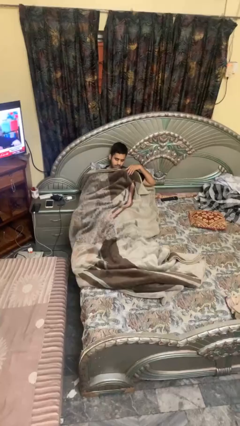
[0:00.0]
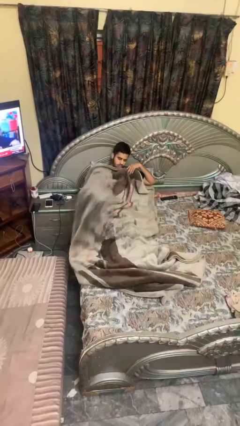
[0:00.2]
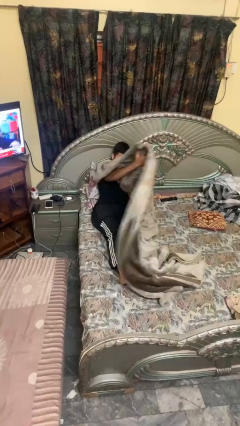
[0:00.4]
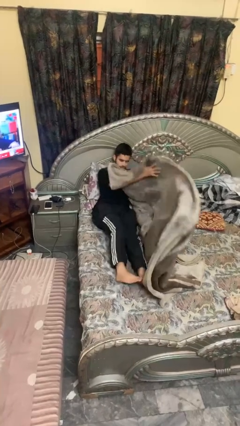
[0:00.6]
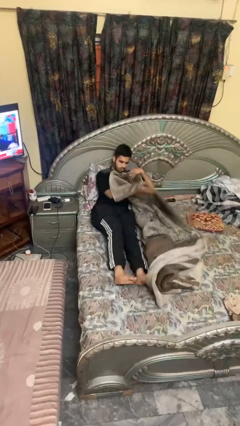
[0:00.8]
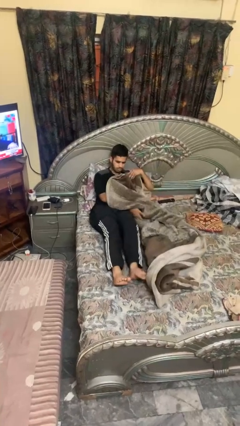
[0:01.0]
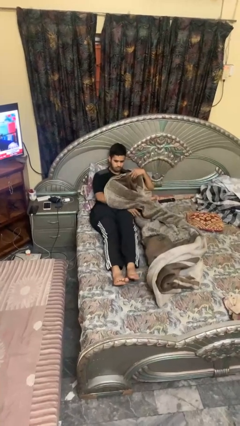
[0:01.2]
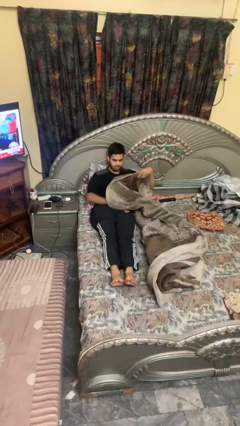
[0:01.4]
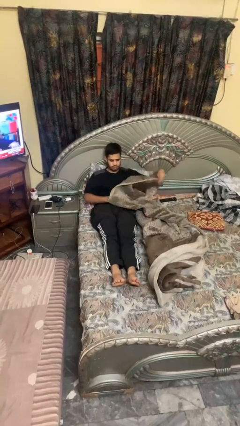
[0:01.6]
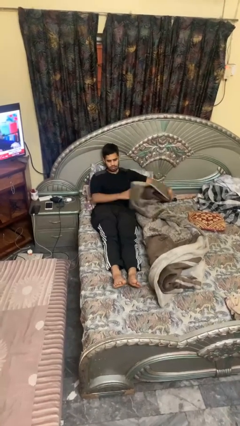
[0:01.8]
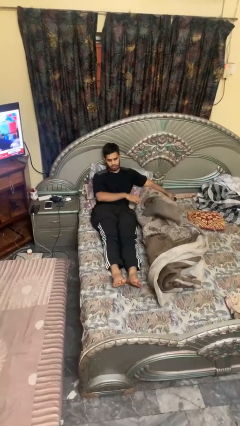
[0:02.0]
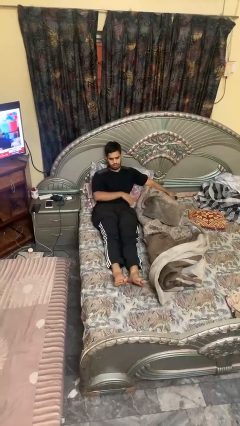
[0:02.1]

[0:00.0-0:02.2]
person uncovers with blanket

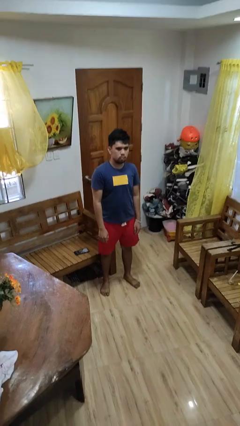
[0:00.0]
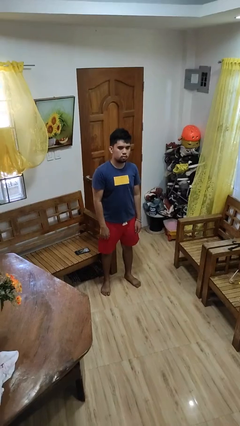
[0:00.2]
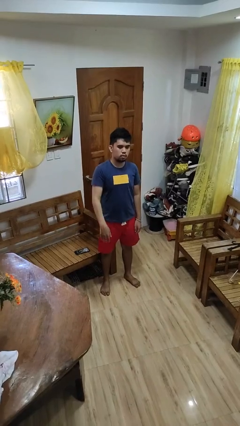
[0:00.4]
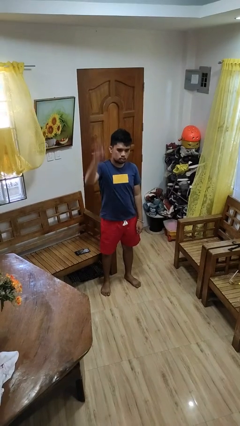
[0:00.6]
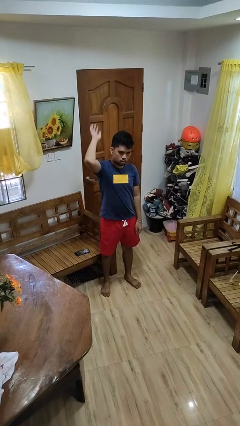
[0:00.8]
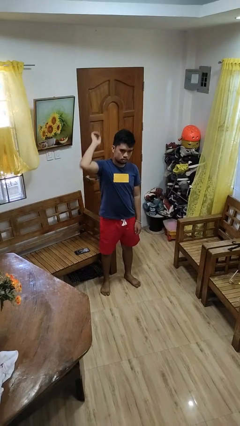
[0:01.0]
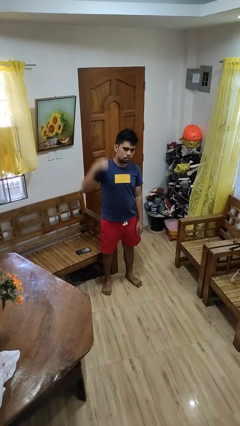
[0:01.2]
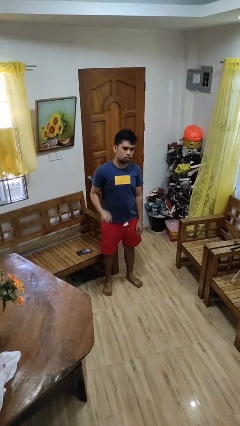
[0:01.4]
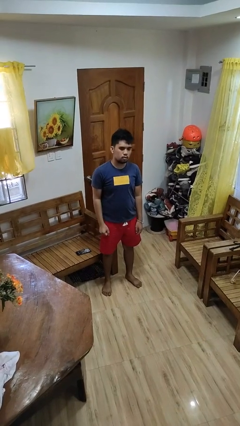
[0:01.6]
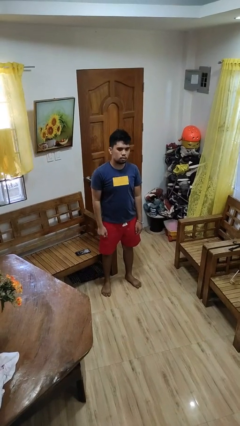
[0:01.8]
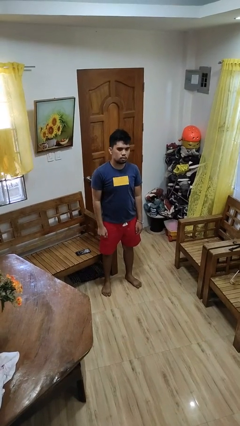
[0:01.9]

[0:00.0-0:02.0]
person gestures swipe up

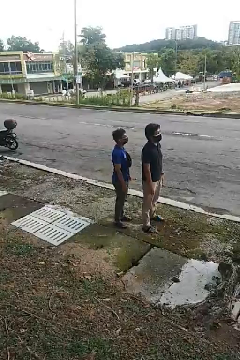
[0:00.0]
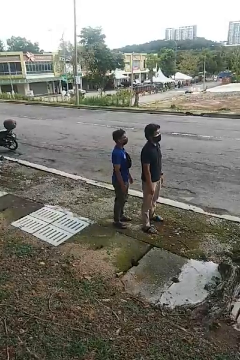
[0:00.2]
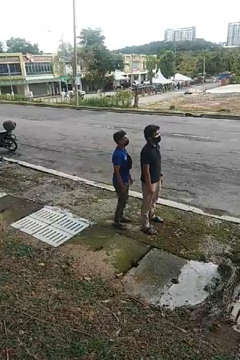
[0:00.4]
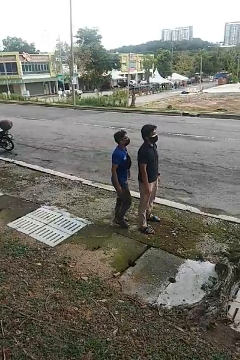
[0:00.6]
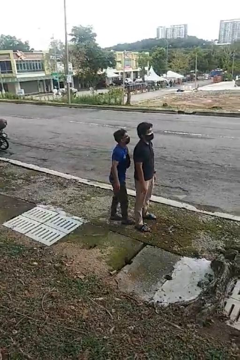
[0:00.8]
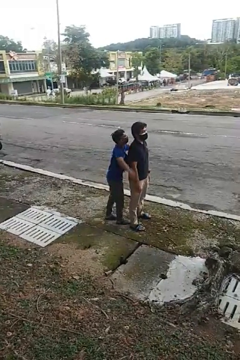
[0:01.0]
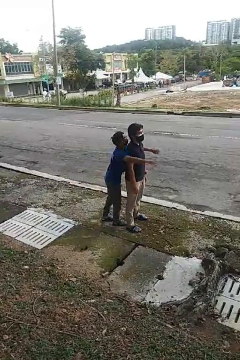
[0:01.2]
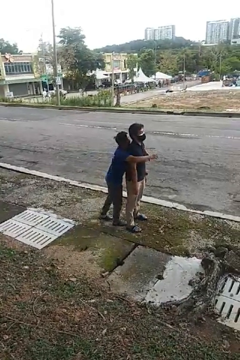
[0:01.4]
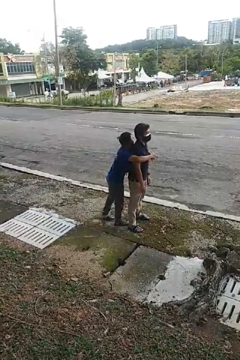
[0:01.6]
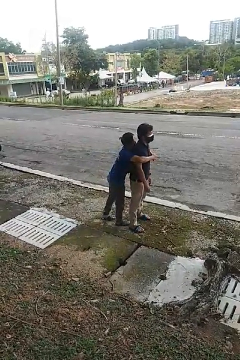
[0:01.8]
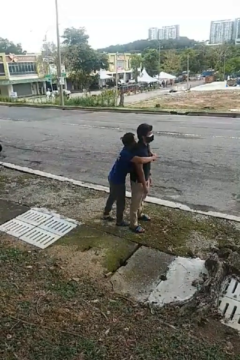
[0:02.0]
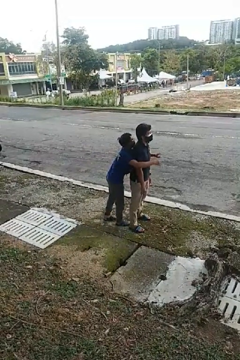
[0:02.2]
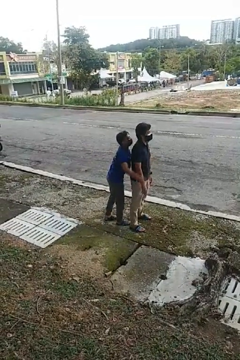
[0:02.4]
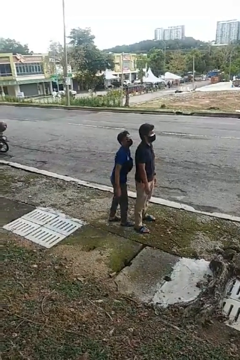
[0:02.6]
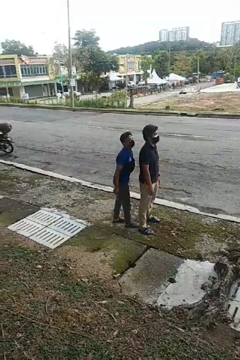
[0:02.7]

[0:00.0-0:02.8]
person hugs person from behind

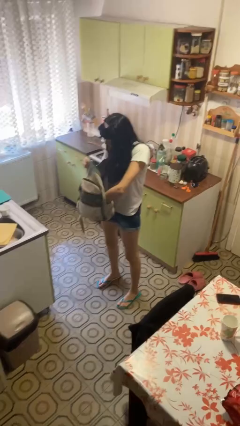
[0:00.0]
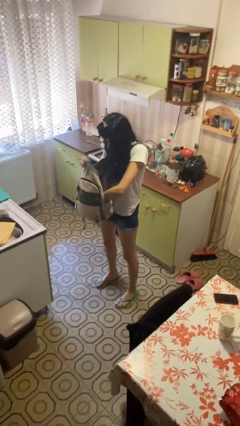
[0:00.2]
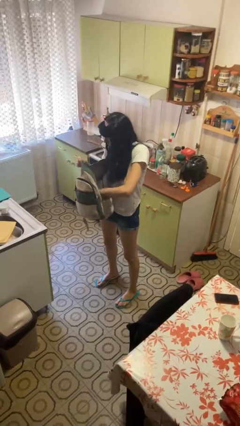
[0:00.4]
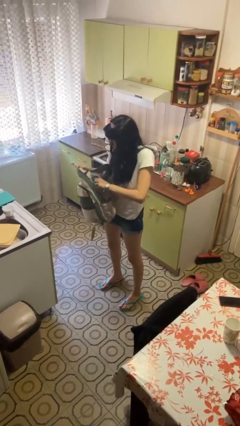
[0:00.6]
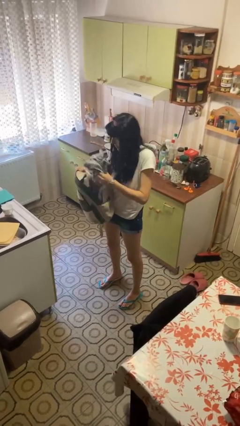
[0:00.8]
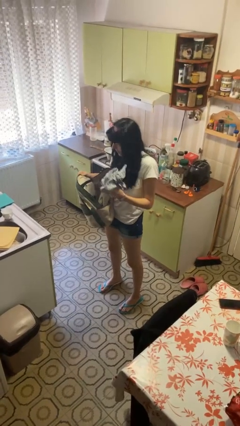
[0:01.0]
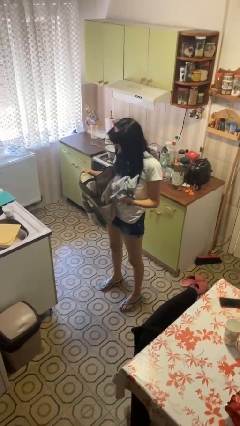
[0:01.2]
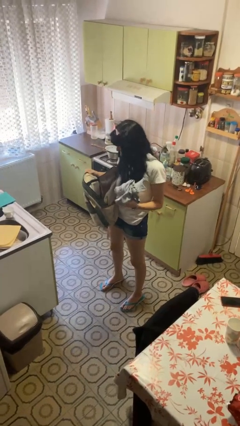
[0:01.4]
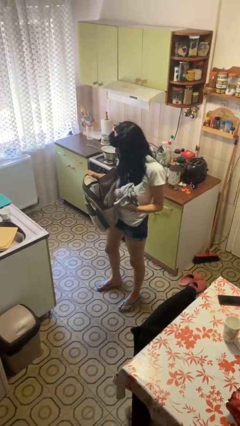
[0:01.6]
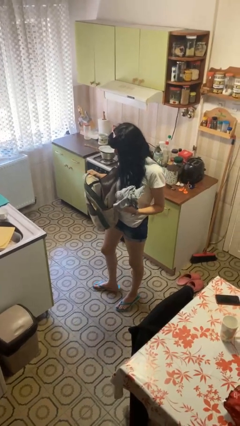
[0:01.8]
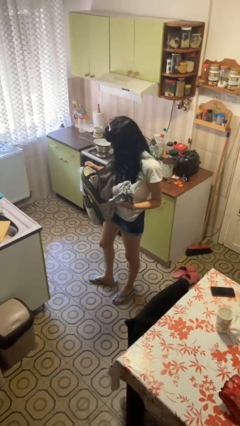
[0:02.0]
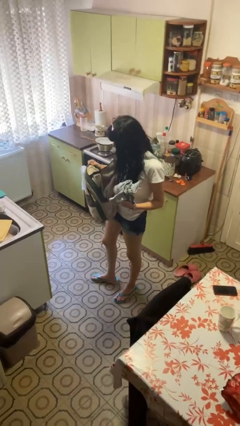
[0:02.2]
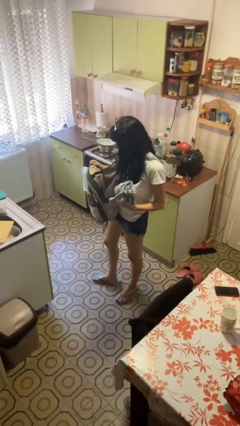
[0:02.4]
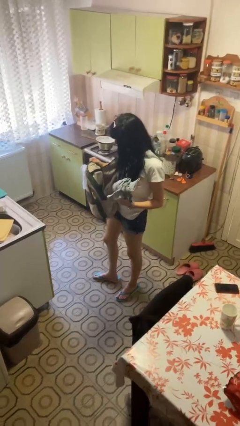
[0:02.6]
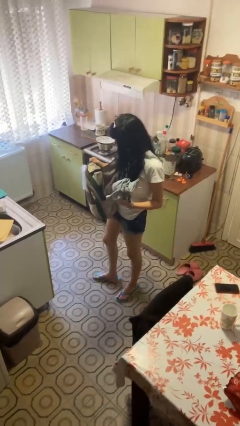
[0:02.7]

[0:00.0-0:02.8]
person takes object from backpack

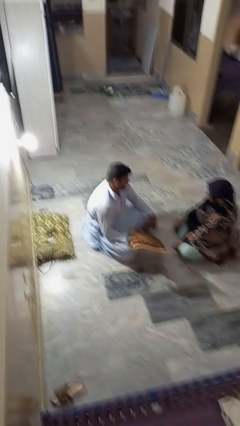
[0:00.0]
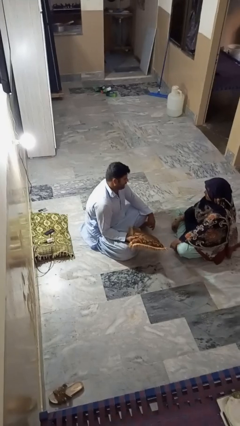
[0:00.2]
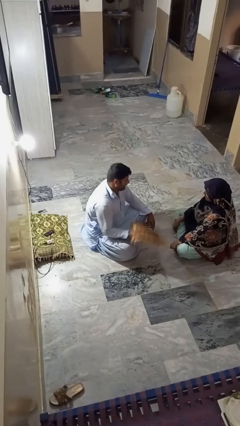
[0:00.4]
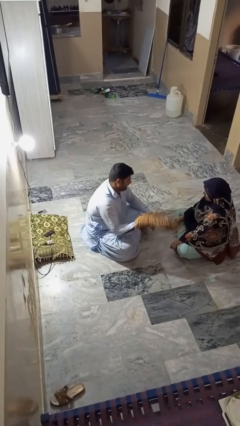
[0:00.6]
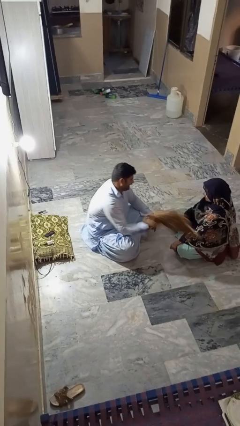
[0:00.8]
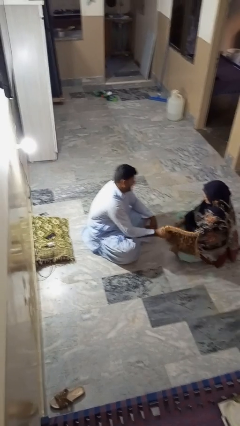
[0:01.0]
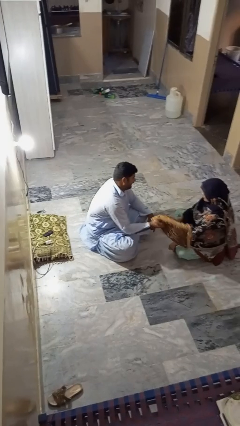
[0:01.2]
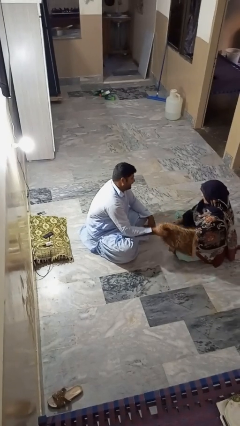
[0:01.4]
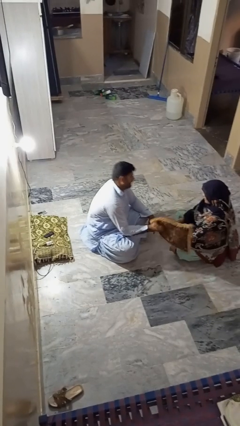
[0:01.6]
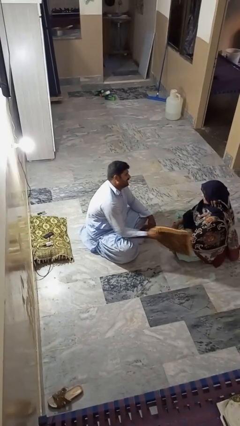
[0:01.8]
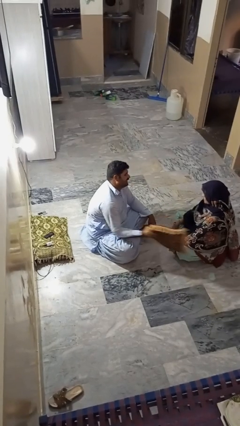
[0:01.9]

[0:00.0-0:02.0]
person hits person with pillow

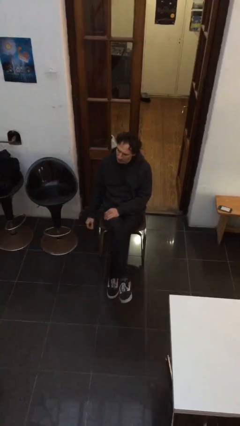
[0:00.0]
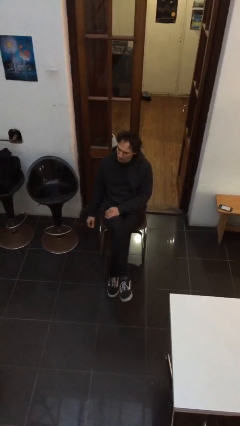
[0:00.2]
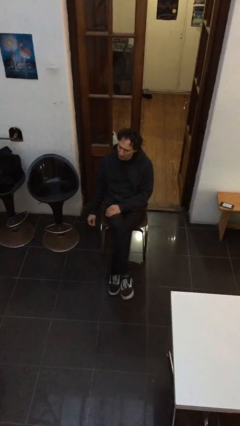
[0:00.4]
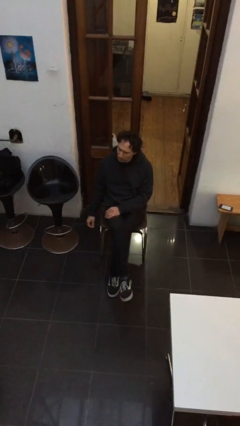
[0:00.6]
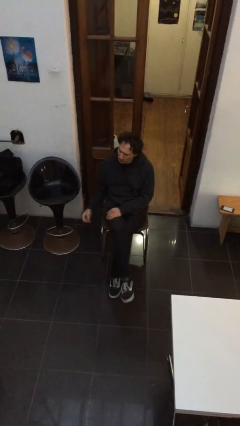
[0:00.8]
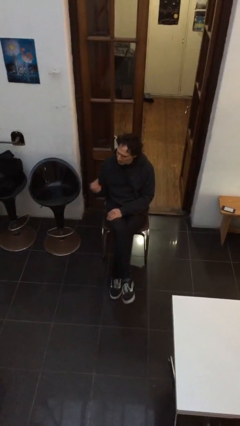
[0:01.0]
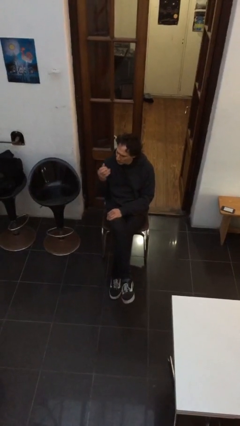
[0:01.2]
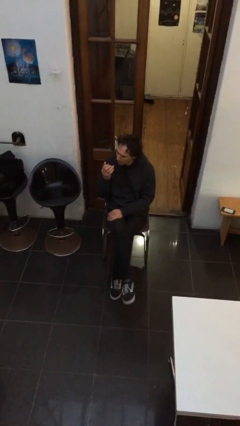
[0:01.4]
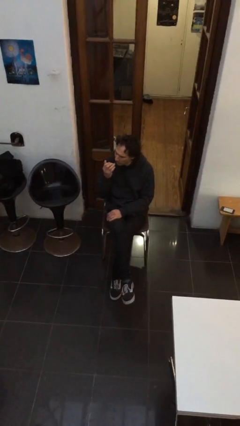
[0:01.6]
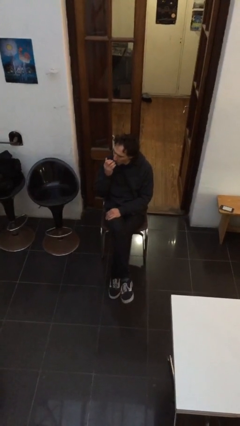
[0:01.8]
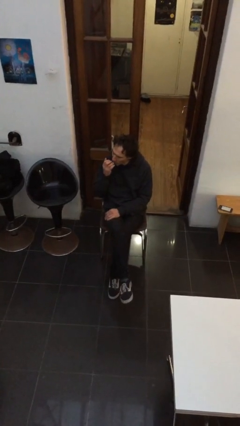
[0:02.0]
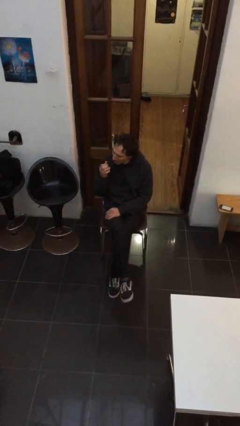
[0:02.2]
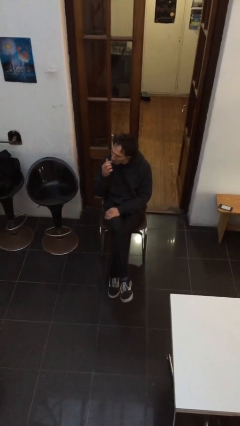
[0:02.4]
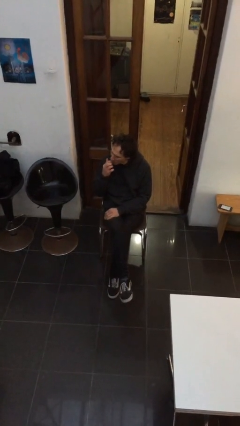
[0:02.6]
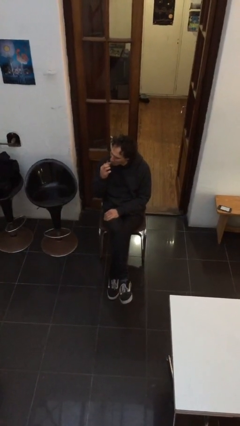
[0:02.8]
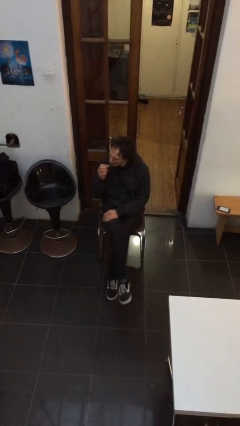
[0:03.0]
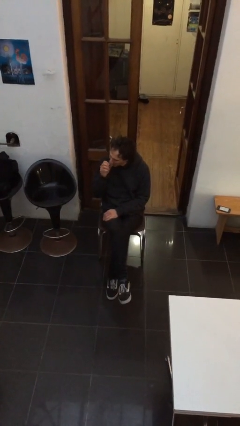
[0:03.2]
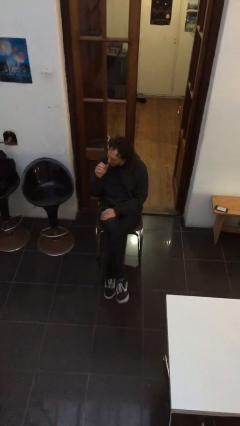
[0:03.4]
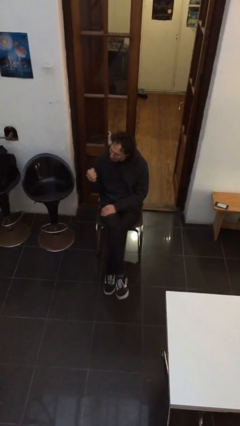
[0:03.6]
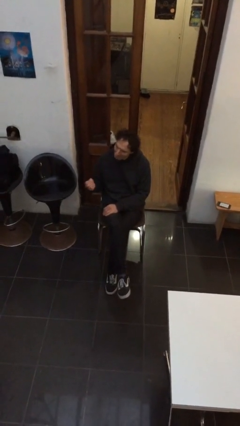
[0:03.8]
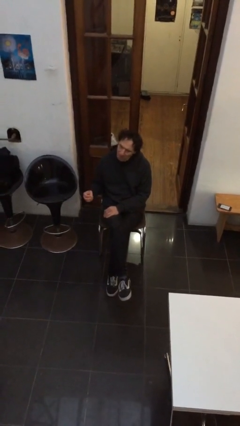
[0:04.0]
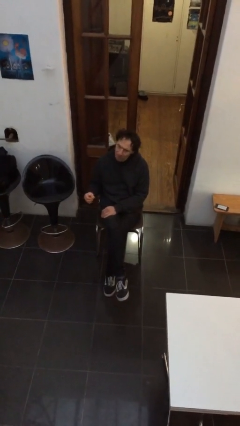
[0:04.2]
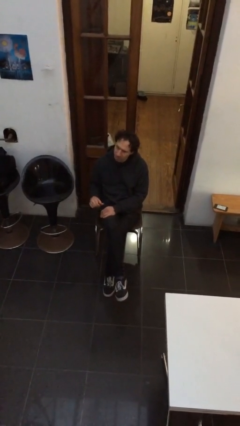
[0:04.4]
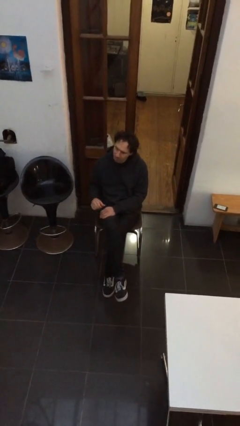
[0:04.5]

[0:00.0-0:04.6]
person licks fingers

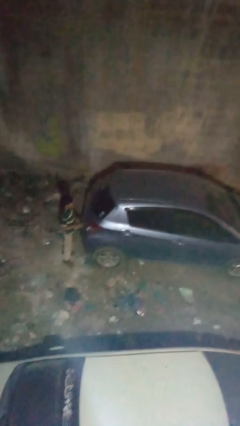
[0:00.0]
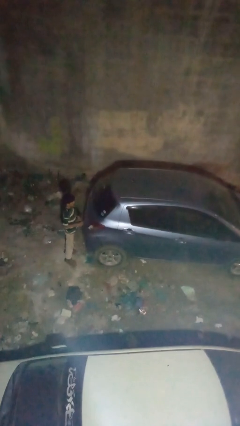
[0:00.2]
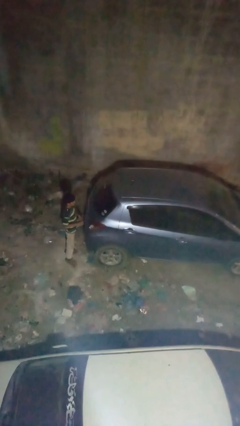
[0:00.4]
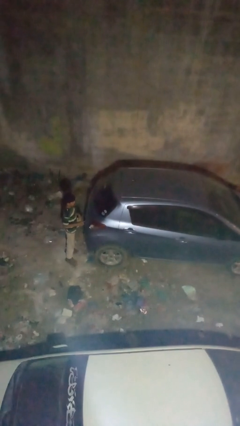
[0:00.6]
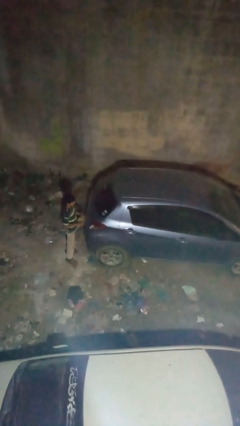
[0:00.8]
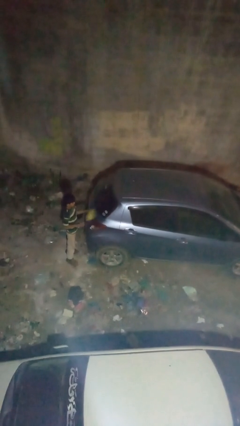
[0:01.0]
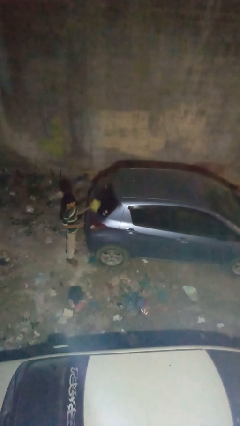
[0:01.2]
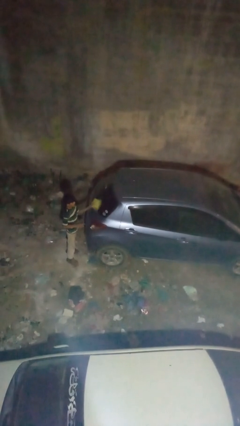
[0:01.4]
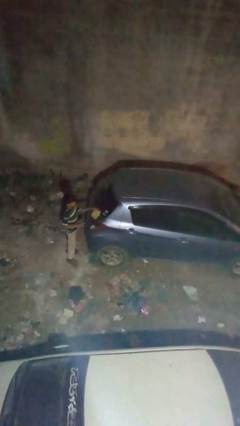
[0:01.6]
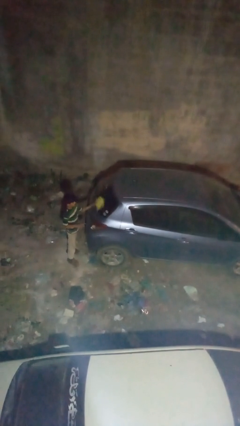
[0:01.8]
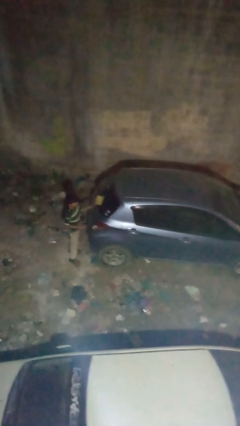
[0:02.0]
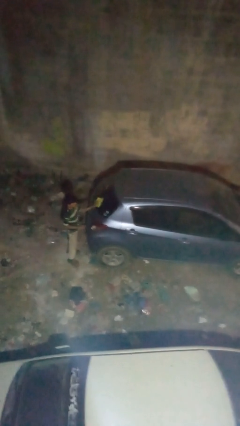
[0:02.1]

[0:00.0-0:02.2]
person polishes car with rag
